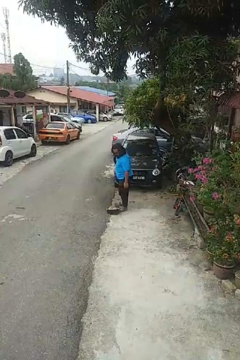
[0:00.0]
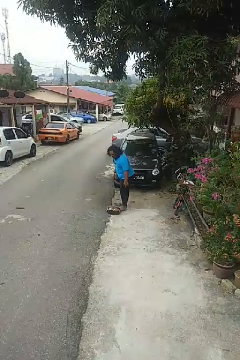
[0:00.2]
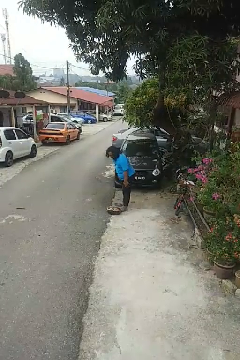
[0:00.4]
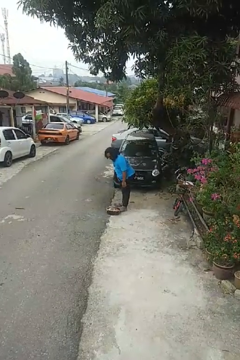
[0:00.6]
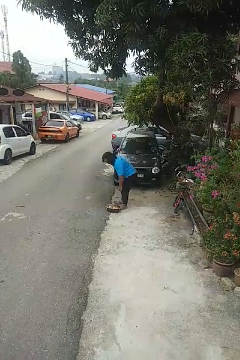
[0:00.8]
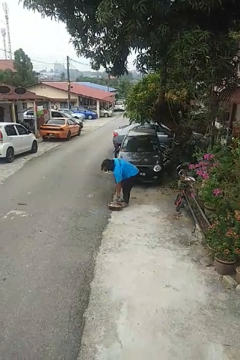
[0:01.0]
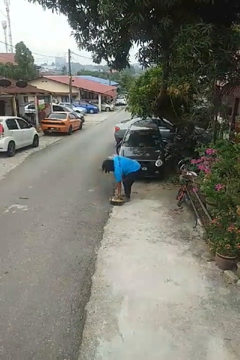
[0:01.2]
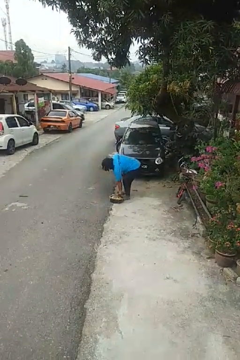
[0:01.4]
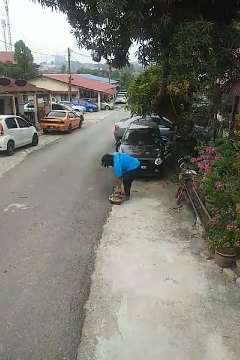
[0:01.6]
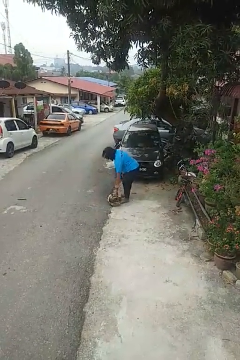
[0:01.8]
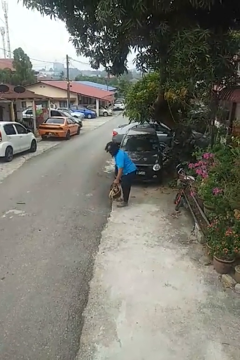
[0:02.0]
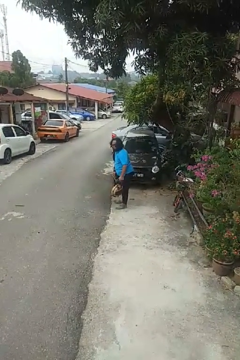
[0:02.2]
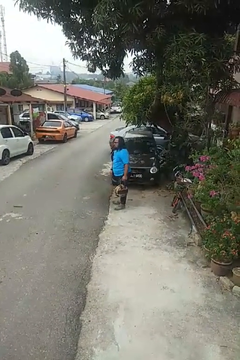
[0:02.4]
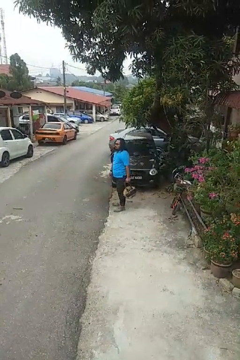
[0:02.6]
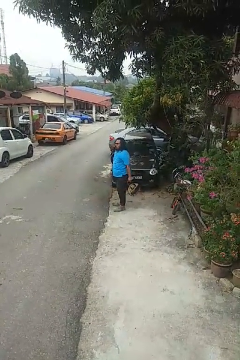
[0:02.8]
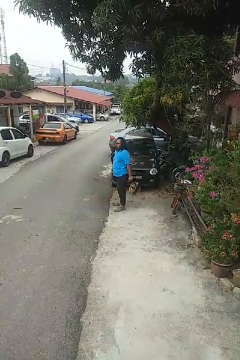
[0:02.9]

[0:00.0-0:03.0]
person picks up object from floor

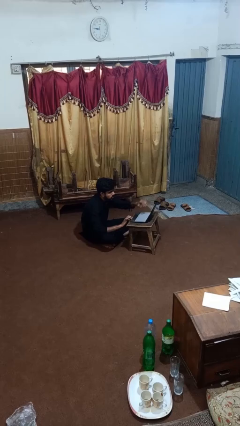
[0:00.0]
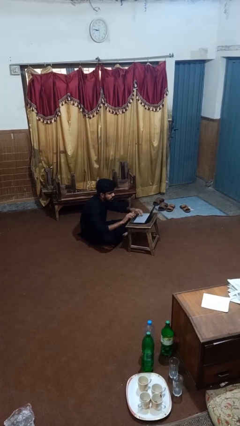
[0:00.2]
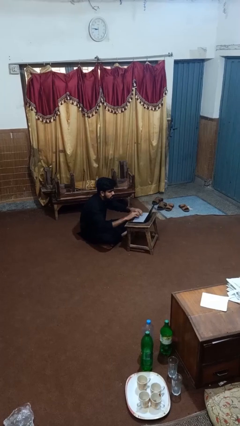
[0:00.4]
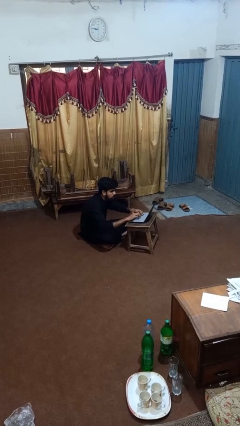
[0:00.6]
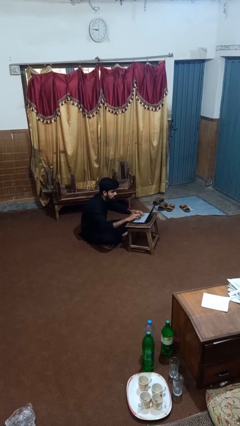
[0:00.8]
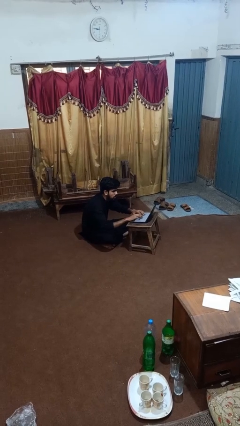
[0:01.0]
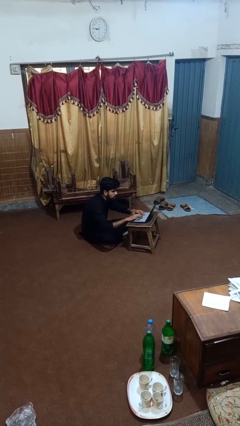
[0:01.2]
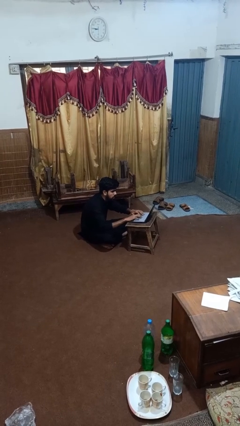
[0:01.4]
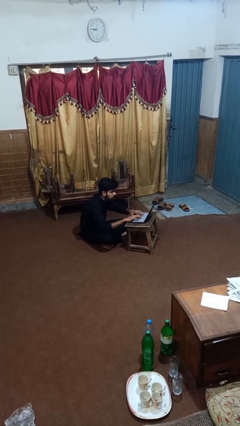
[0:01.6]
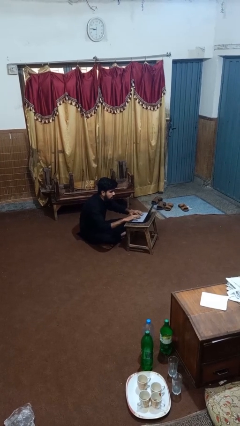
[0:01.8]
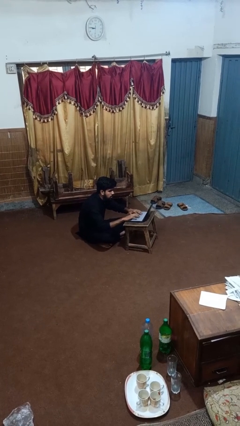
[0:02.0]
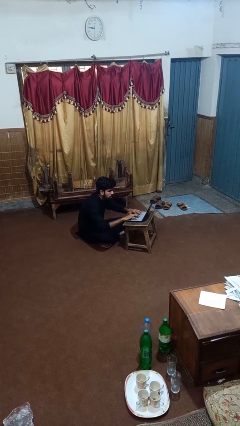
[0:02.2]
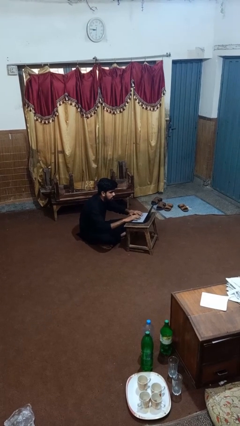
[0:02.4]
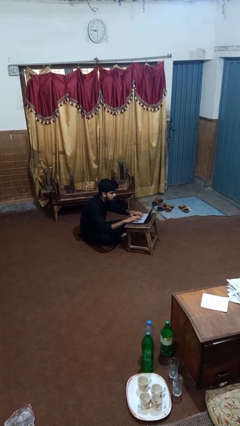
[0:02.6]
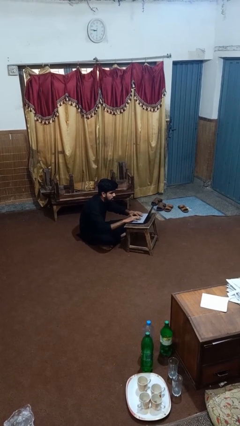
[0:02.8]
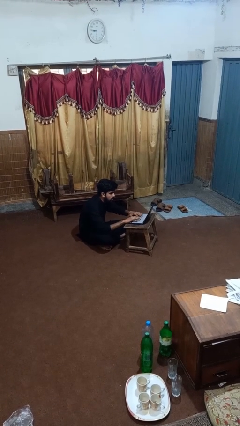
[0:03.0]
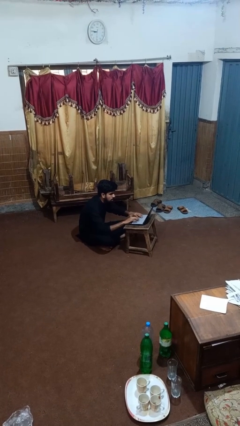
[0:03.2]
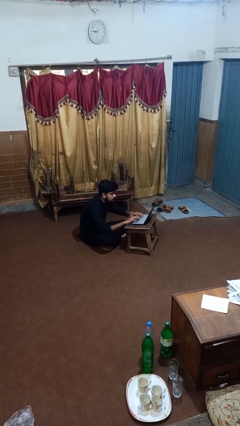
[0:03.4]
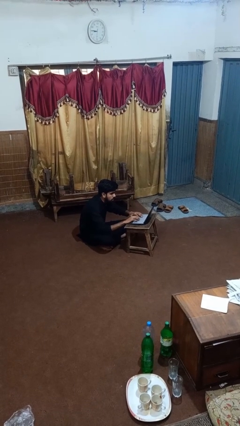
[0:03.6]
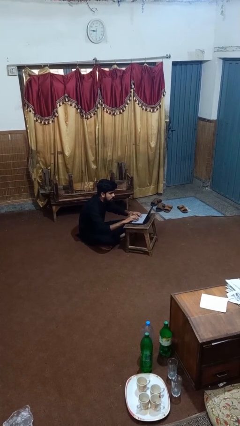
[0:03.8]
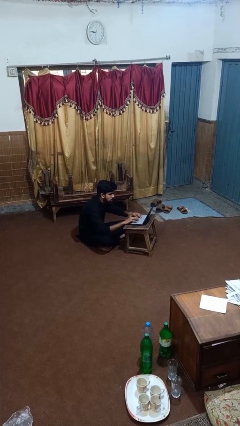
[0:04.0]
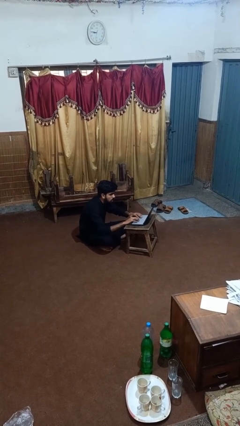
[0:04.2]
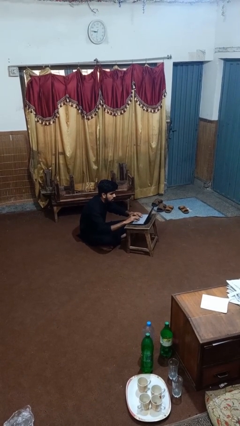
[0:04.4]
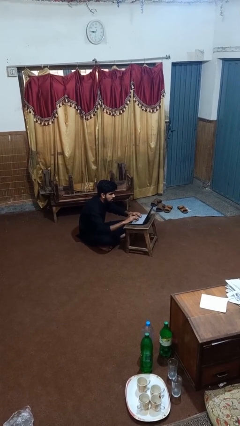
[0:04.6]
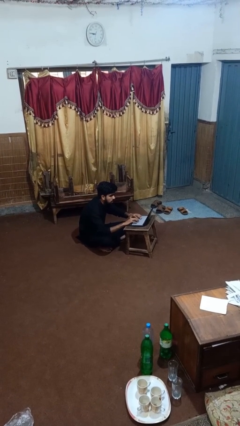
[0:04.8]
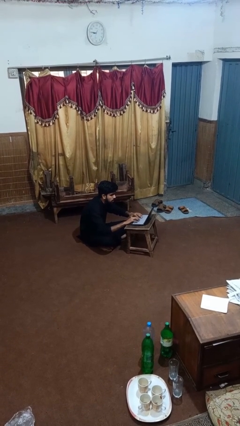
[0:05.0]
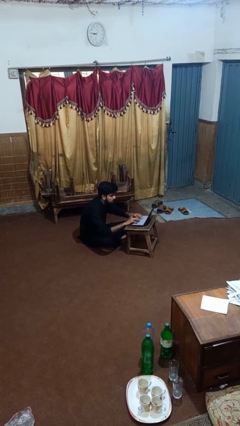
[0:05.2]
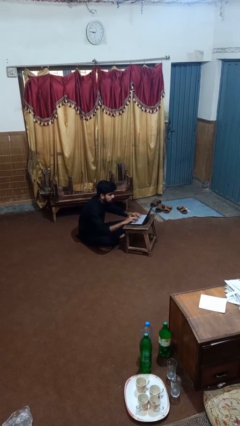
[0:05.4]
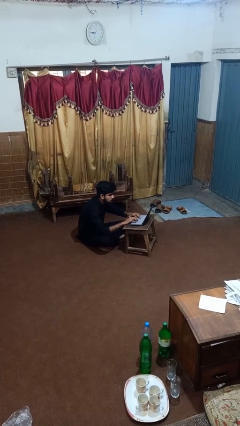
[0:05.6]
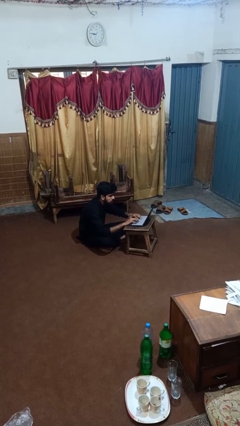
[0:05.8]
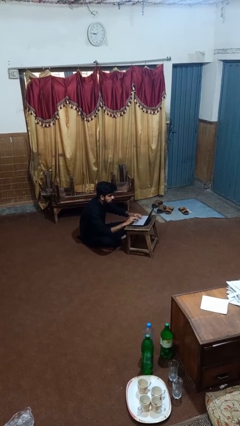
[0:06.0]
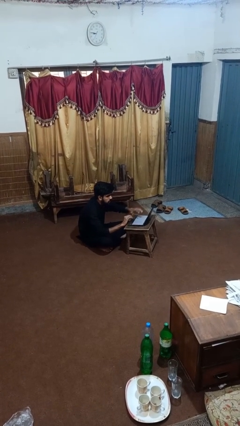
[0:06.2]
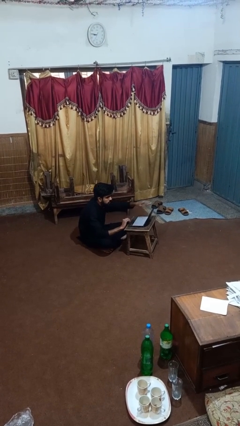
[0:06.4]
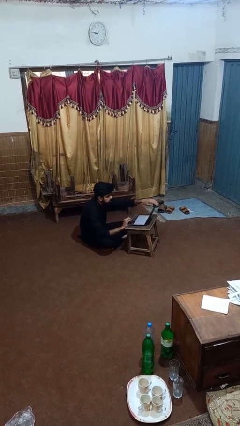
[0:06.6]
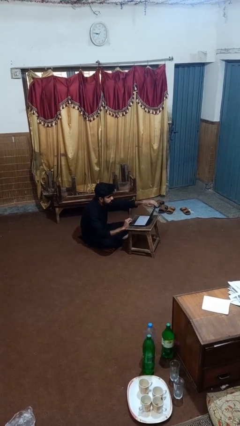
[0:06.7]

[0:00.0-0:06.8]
person interacts with laptop

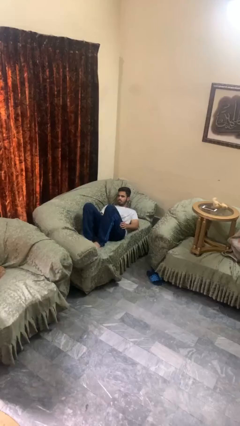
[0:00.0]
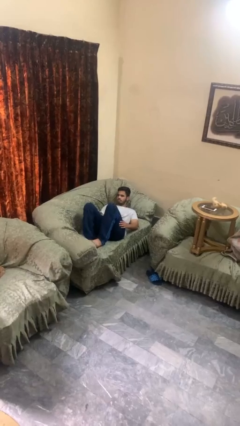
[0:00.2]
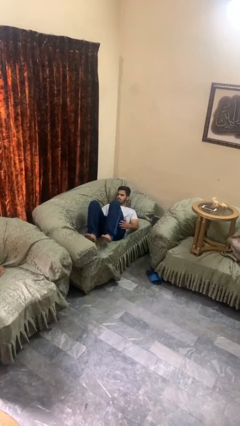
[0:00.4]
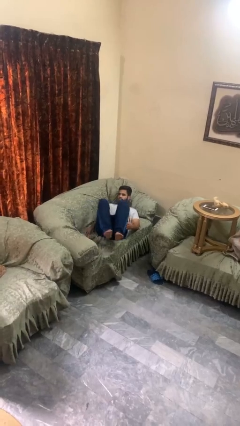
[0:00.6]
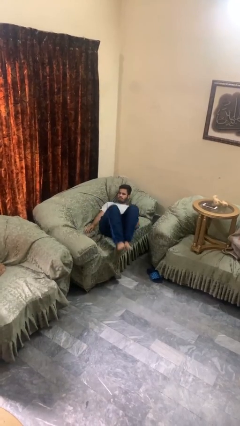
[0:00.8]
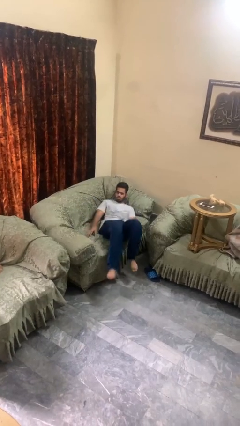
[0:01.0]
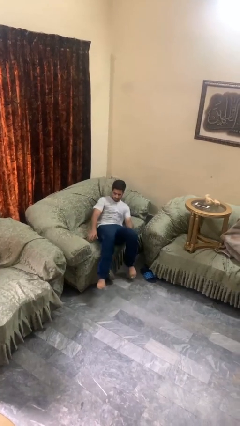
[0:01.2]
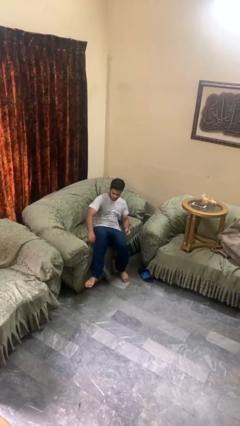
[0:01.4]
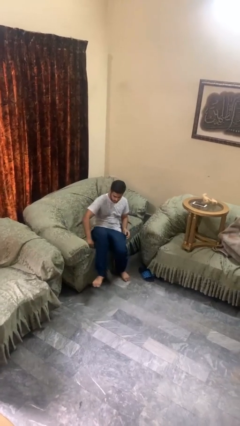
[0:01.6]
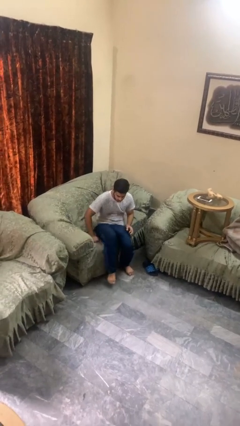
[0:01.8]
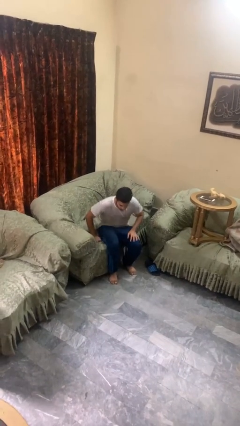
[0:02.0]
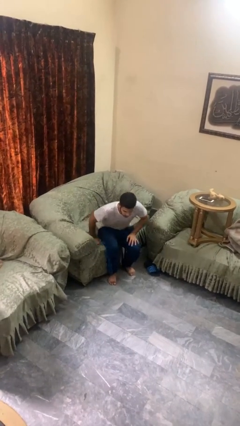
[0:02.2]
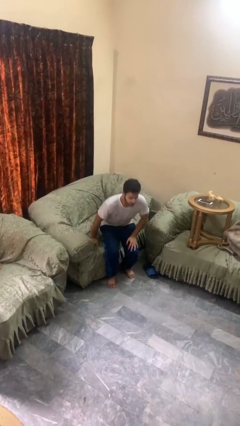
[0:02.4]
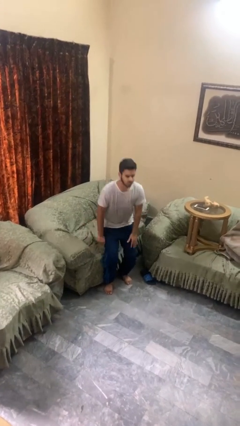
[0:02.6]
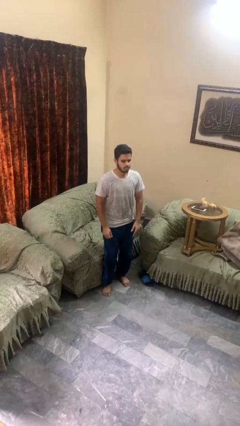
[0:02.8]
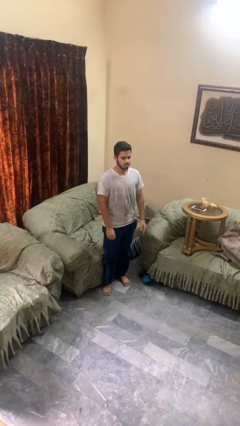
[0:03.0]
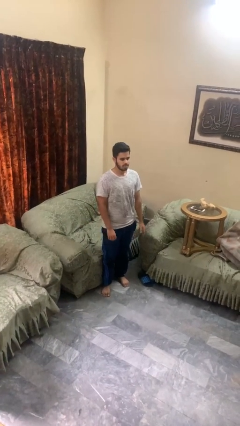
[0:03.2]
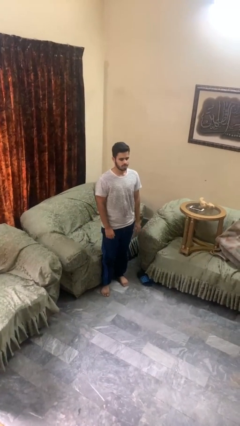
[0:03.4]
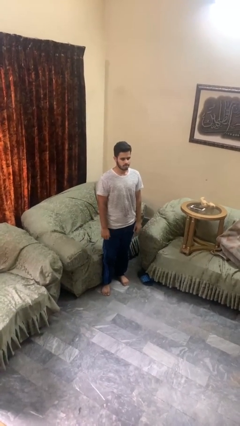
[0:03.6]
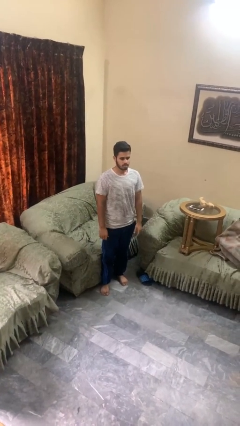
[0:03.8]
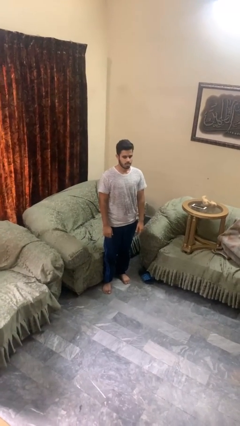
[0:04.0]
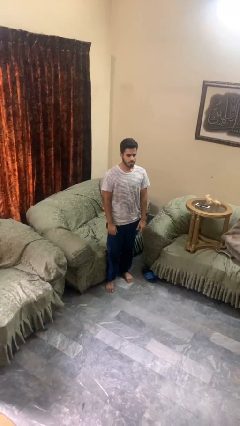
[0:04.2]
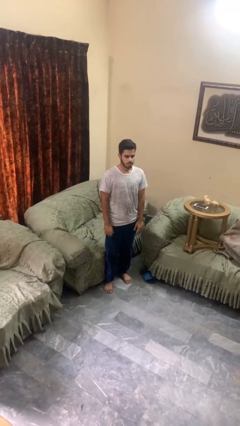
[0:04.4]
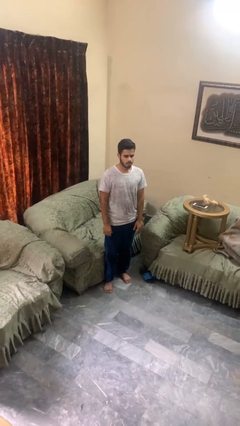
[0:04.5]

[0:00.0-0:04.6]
person stands up

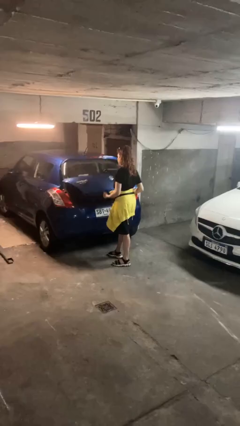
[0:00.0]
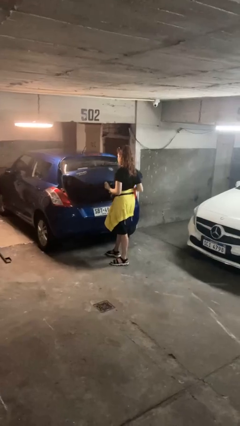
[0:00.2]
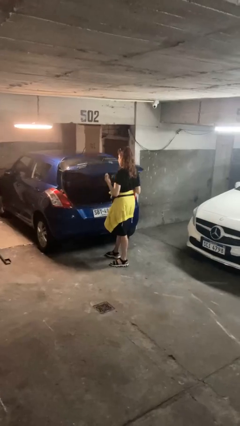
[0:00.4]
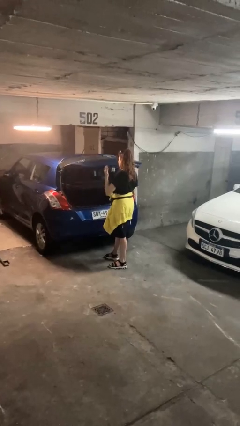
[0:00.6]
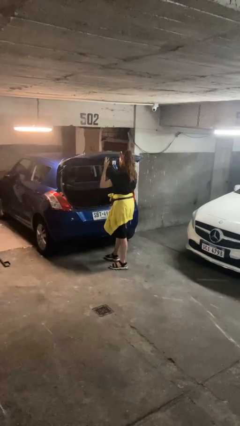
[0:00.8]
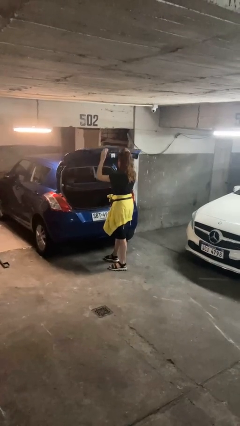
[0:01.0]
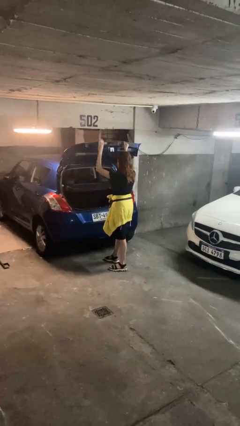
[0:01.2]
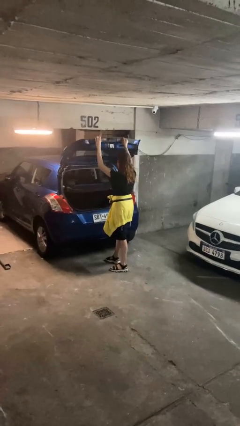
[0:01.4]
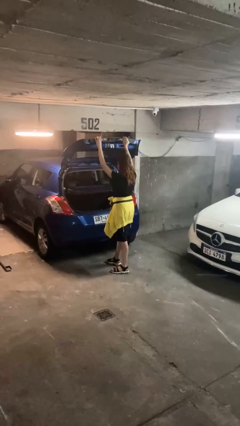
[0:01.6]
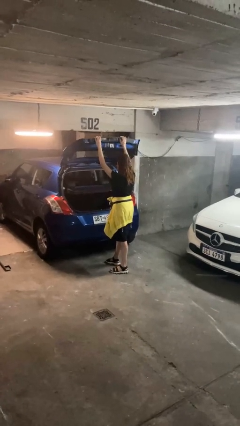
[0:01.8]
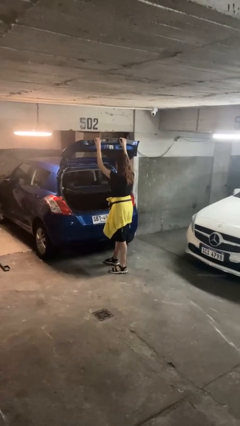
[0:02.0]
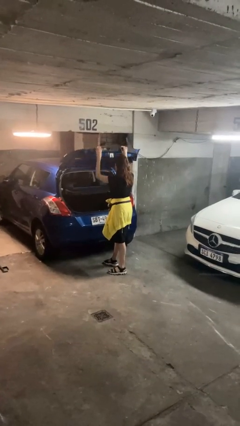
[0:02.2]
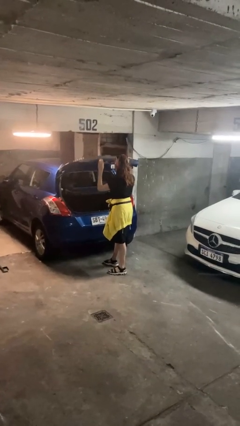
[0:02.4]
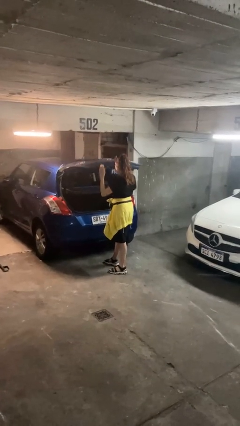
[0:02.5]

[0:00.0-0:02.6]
person opens car trunk

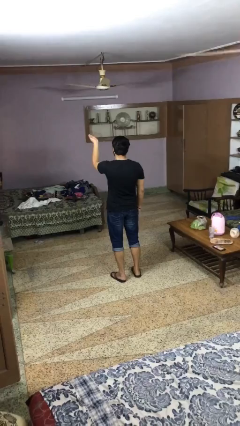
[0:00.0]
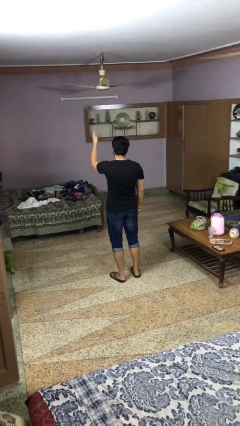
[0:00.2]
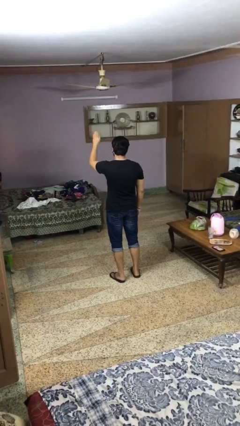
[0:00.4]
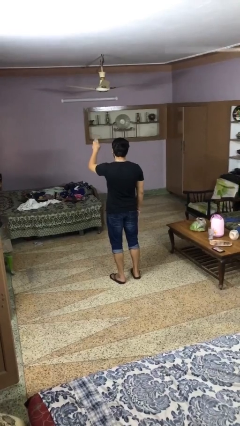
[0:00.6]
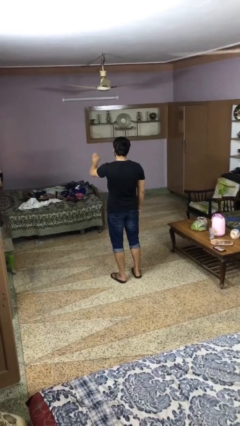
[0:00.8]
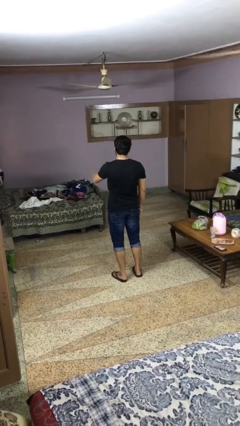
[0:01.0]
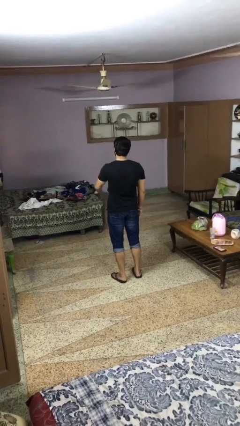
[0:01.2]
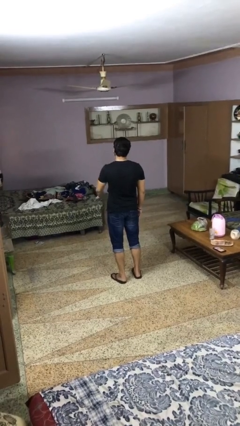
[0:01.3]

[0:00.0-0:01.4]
person gestures swipe down
